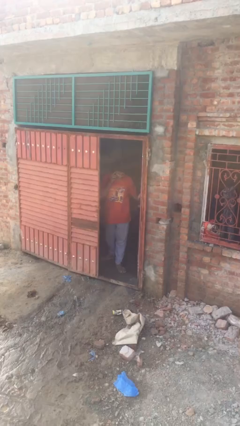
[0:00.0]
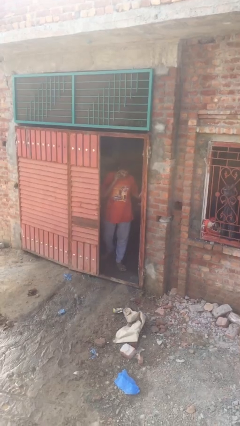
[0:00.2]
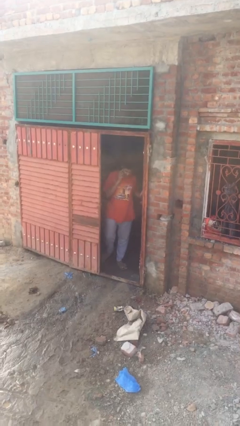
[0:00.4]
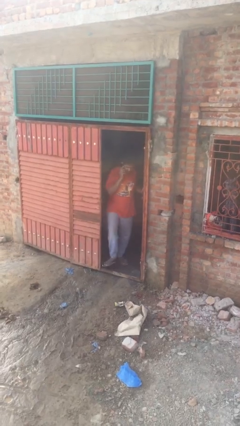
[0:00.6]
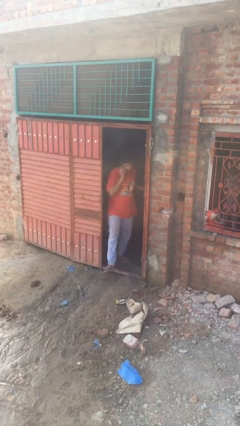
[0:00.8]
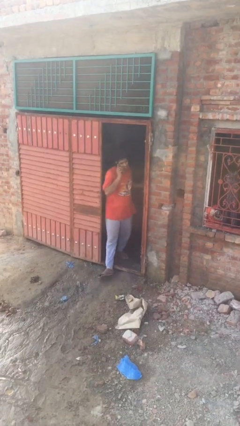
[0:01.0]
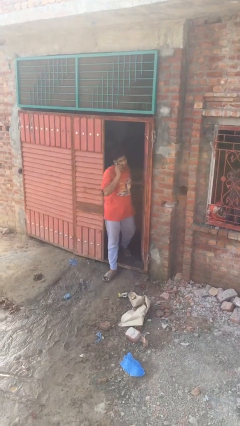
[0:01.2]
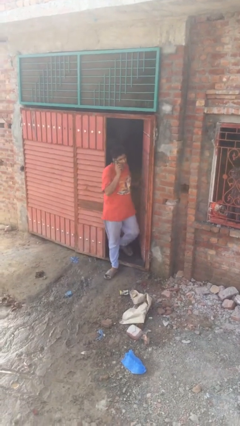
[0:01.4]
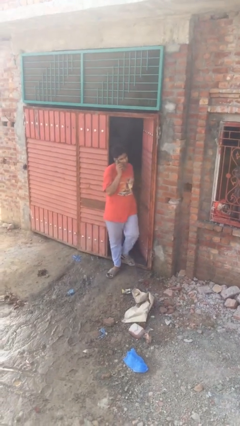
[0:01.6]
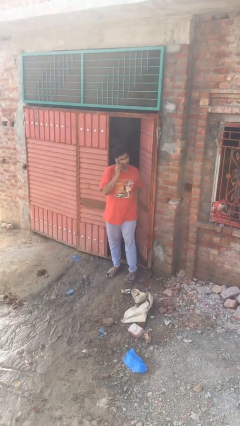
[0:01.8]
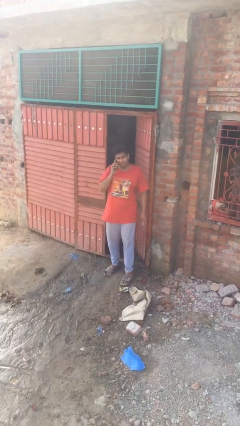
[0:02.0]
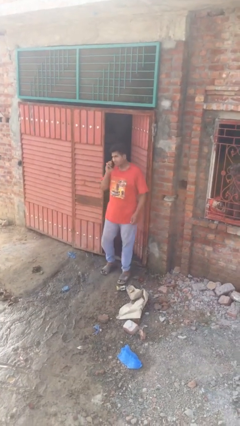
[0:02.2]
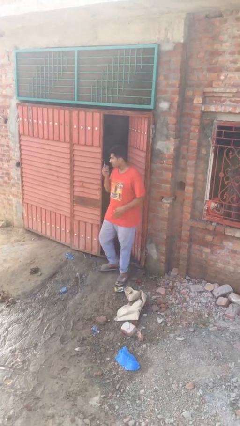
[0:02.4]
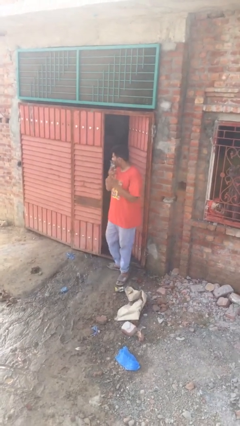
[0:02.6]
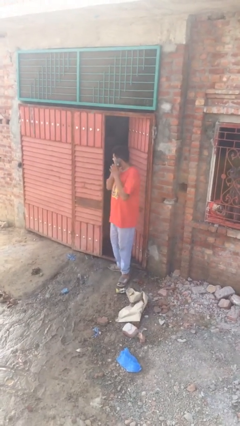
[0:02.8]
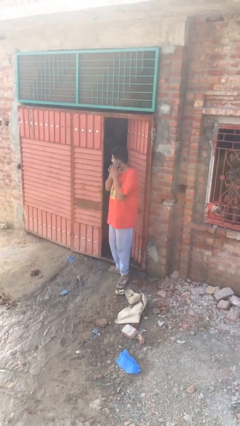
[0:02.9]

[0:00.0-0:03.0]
person enters scene through structure

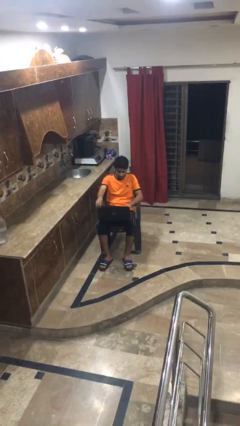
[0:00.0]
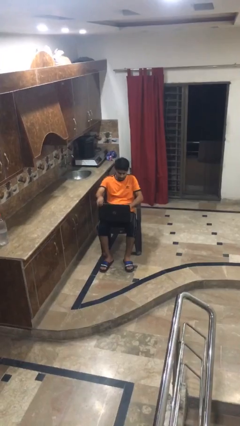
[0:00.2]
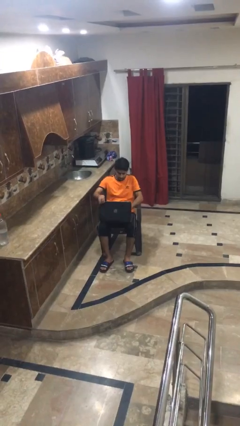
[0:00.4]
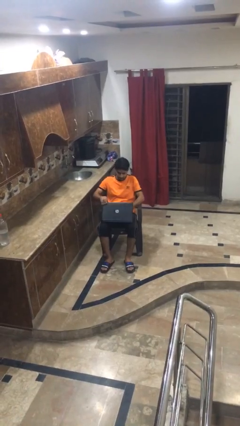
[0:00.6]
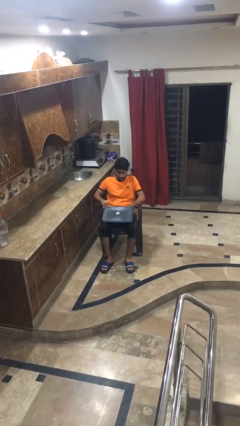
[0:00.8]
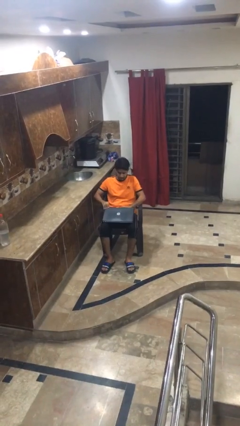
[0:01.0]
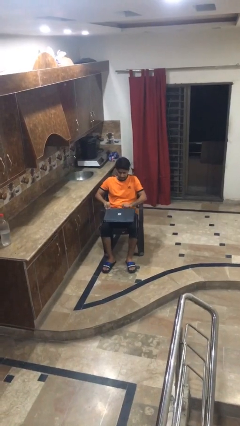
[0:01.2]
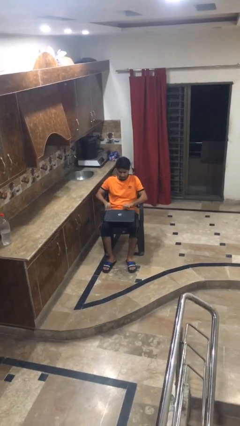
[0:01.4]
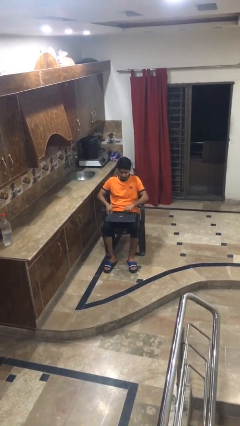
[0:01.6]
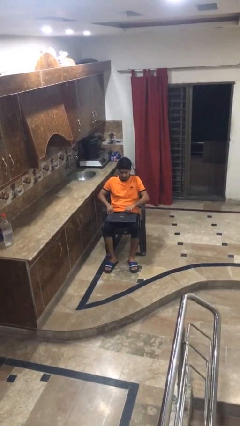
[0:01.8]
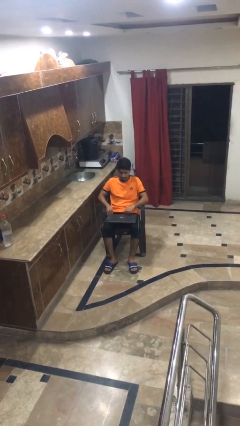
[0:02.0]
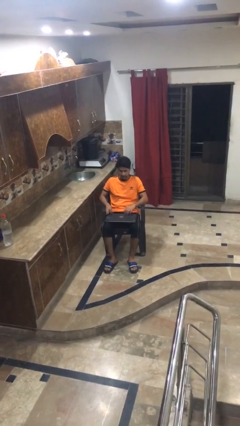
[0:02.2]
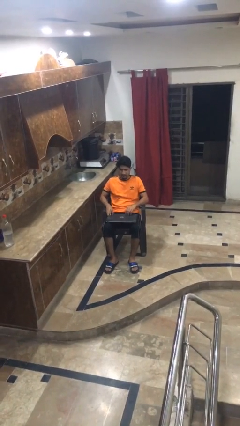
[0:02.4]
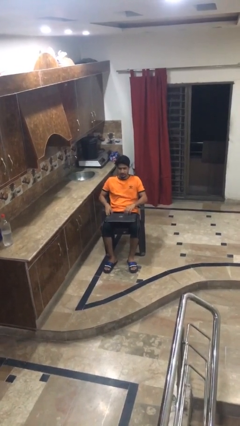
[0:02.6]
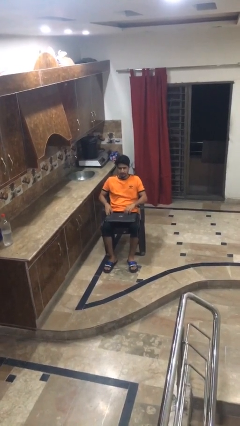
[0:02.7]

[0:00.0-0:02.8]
person closes laptop

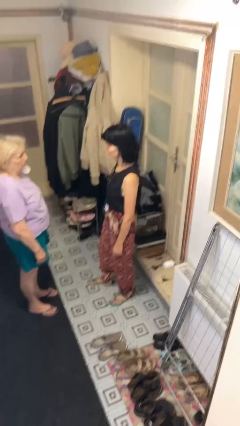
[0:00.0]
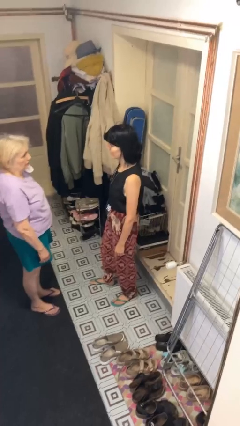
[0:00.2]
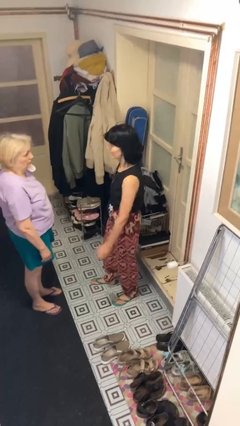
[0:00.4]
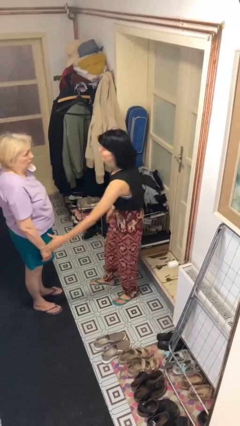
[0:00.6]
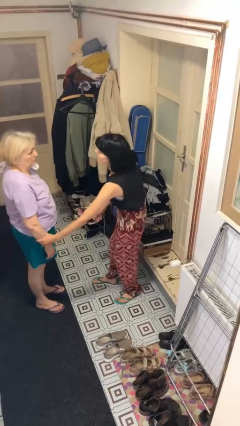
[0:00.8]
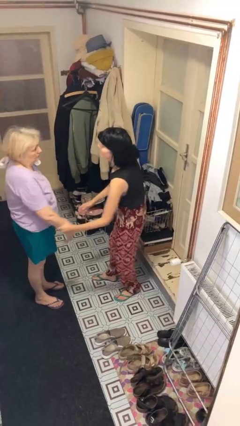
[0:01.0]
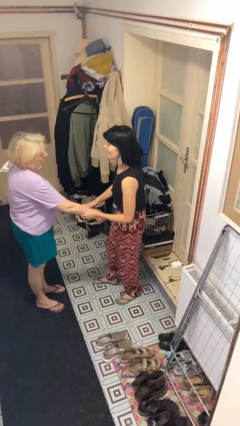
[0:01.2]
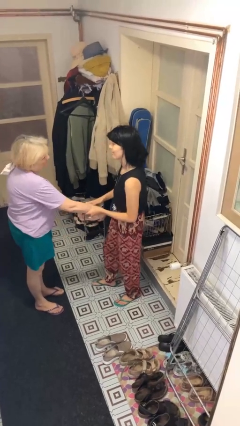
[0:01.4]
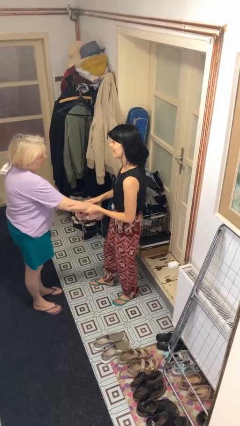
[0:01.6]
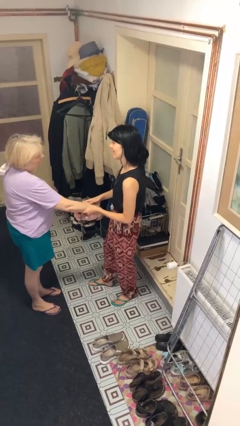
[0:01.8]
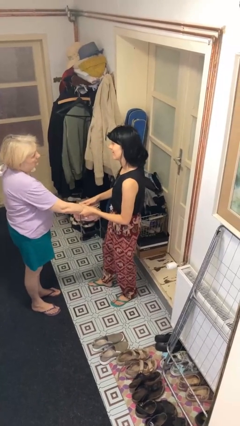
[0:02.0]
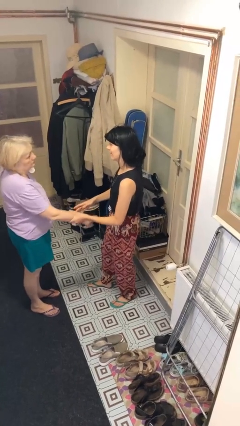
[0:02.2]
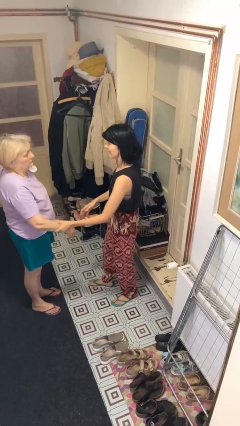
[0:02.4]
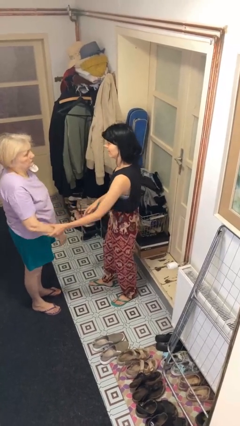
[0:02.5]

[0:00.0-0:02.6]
person grabs person by forearm

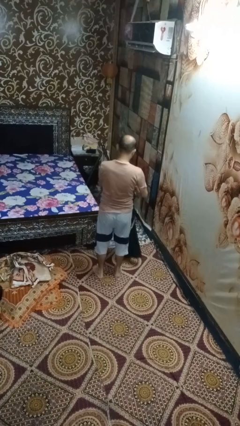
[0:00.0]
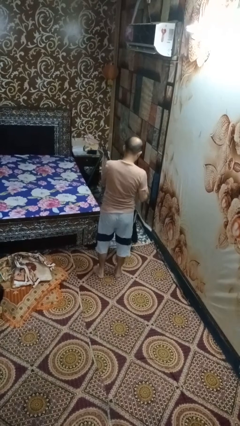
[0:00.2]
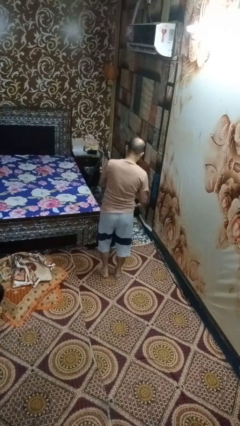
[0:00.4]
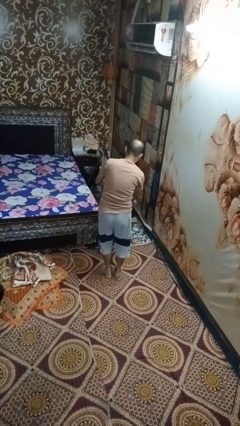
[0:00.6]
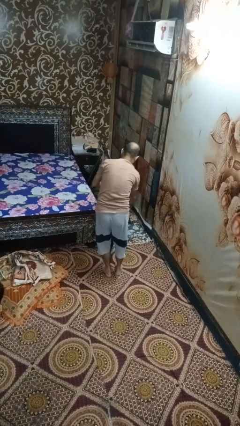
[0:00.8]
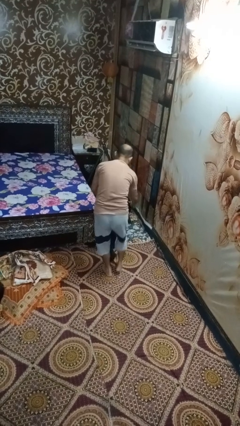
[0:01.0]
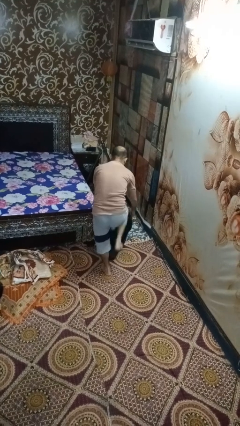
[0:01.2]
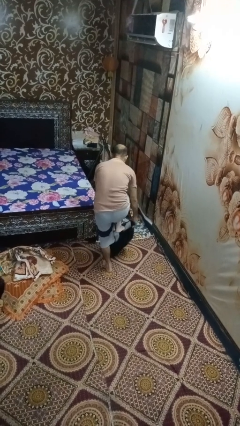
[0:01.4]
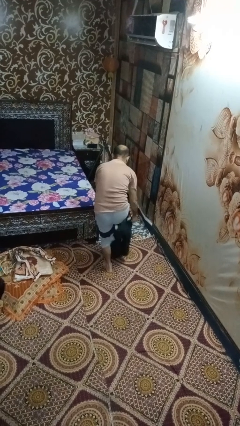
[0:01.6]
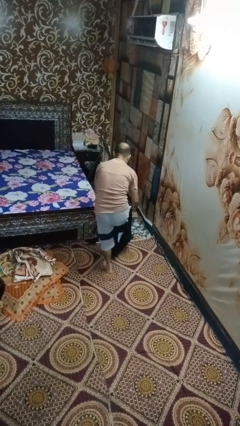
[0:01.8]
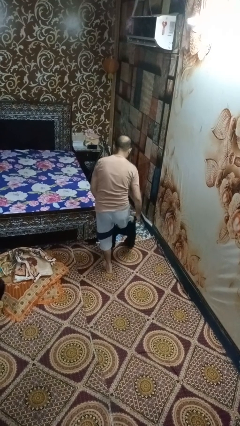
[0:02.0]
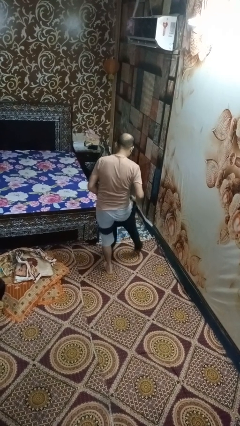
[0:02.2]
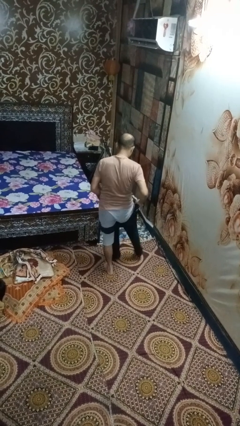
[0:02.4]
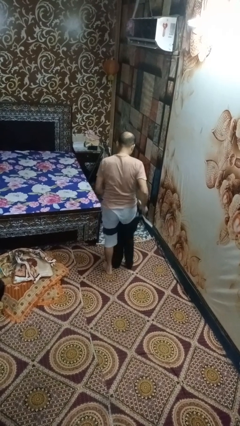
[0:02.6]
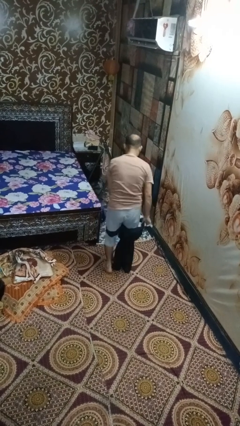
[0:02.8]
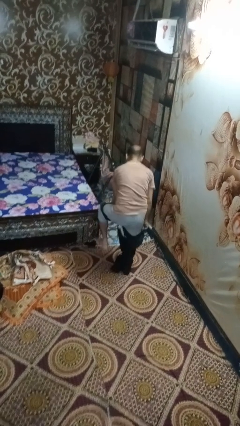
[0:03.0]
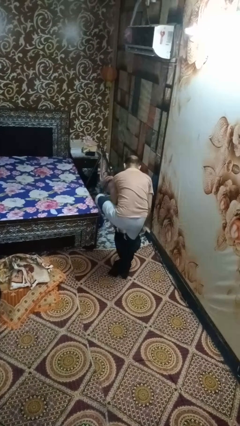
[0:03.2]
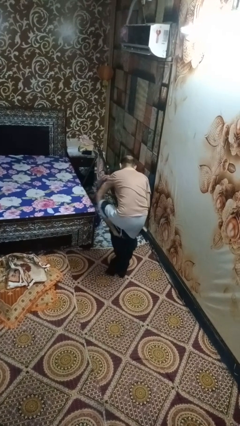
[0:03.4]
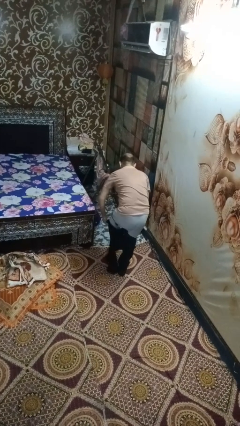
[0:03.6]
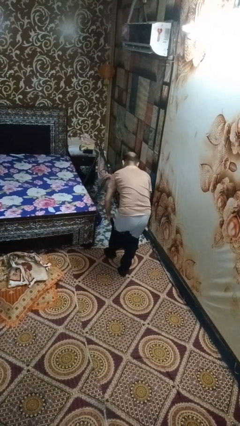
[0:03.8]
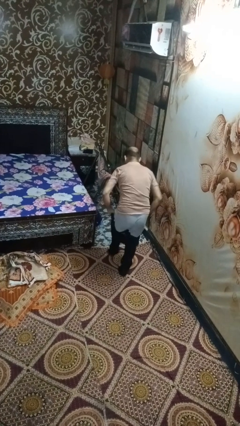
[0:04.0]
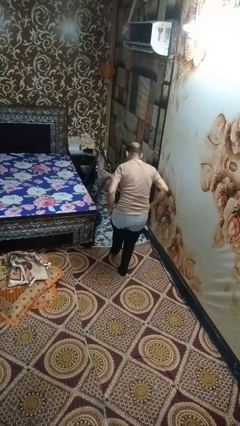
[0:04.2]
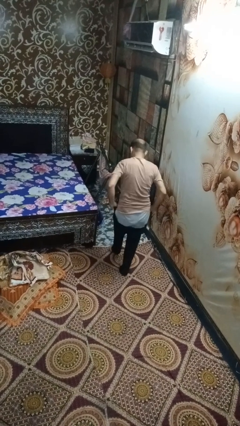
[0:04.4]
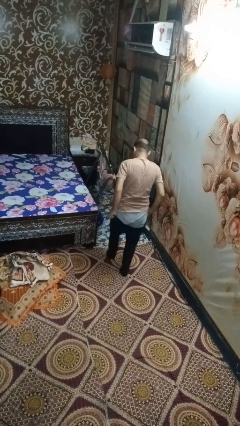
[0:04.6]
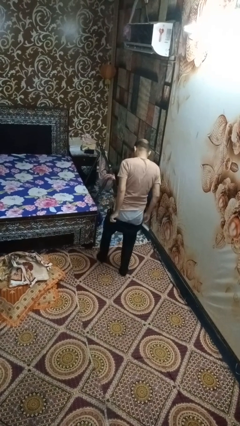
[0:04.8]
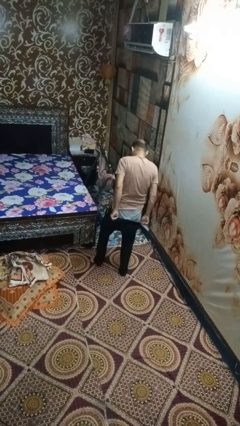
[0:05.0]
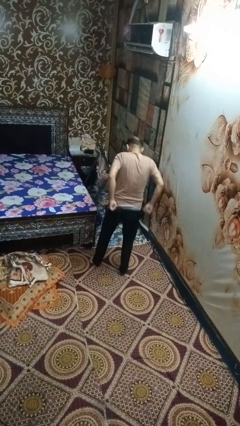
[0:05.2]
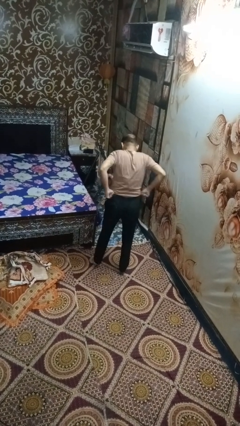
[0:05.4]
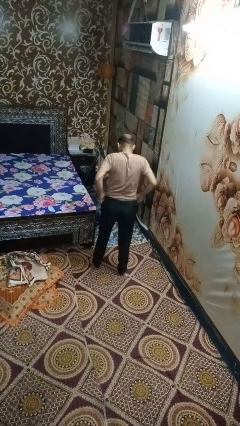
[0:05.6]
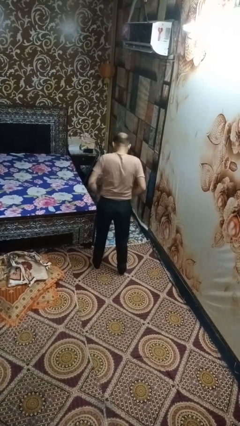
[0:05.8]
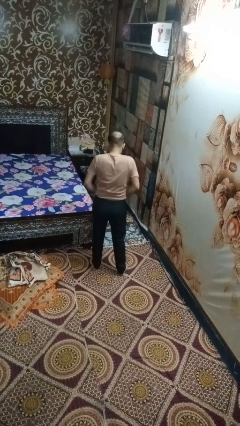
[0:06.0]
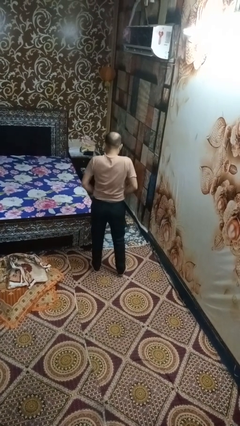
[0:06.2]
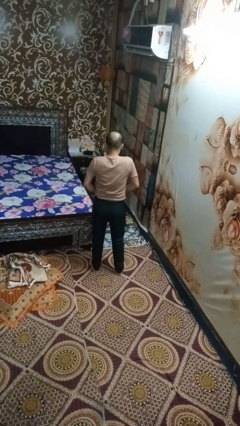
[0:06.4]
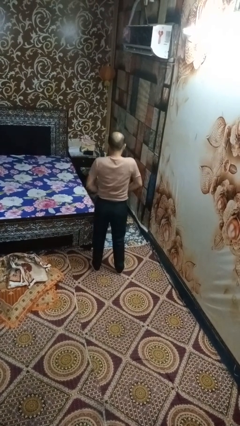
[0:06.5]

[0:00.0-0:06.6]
person puts on pants

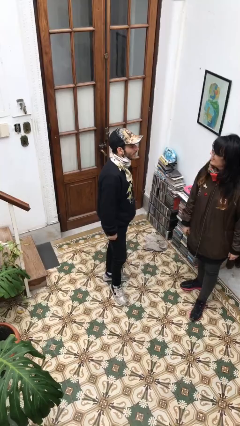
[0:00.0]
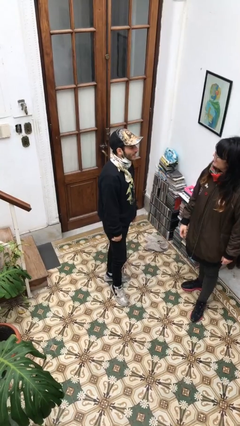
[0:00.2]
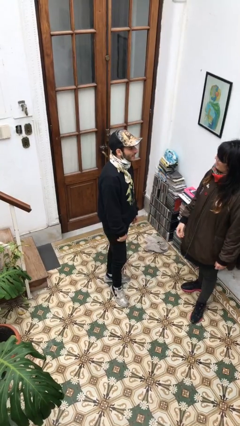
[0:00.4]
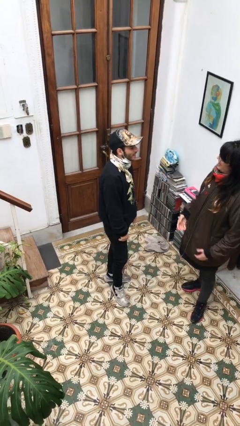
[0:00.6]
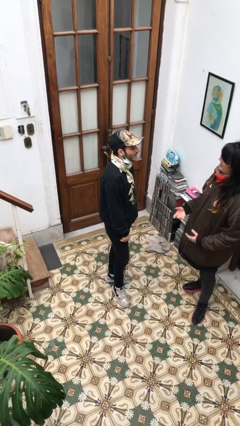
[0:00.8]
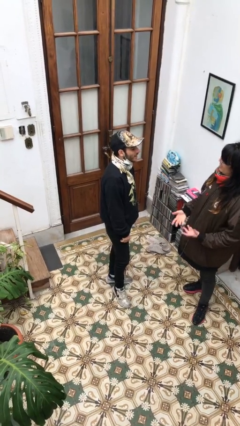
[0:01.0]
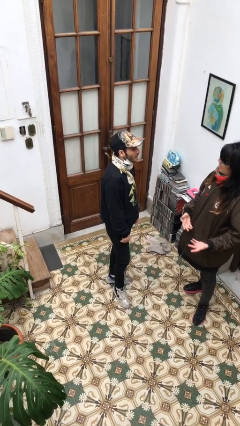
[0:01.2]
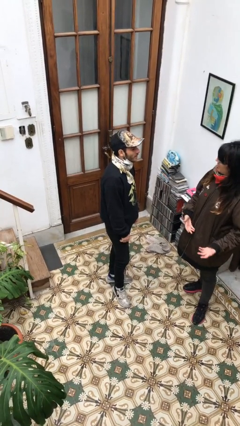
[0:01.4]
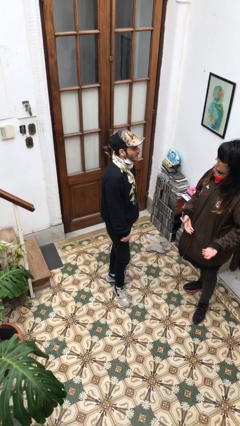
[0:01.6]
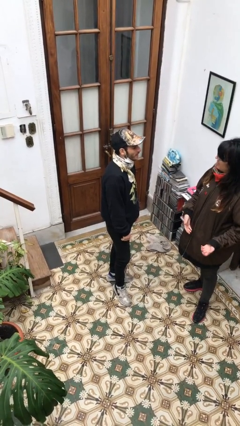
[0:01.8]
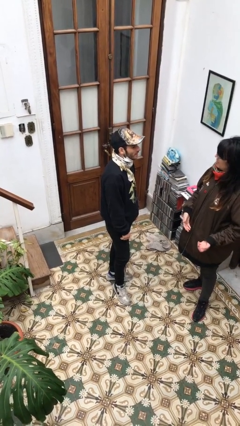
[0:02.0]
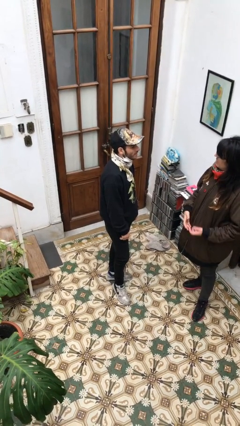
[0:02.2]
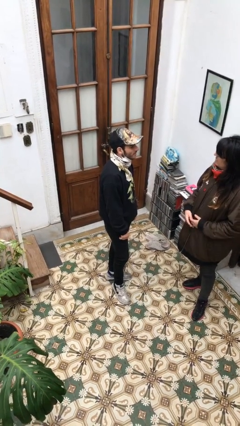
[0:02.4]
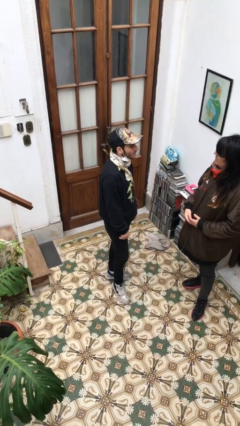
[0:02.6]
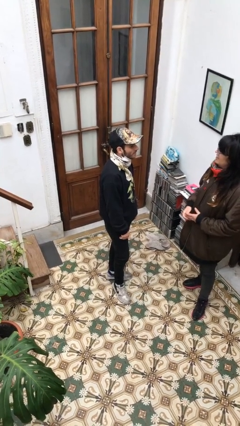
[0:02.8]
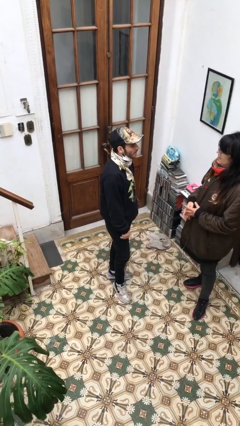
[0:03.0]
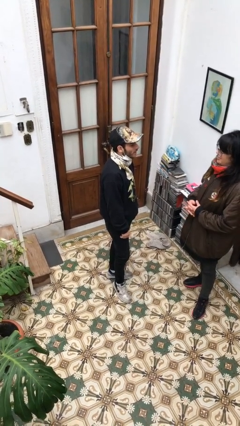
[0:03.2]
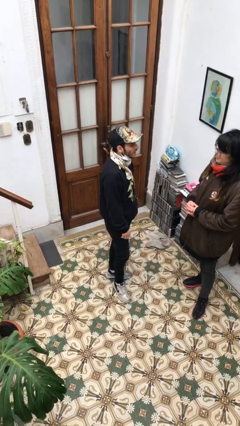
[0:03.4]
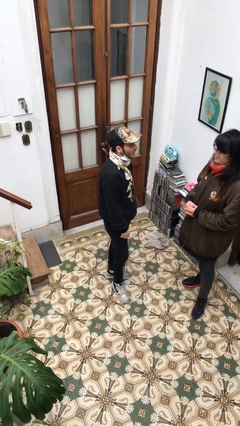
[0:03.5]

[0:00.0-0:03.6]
person talks to person
